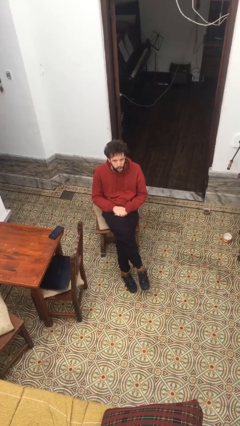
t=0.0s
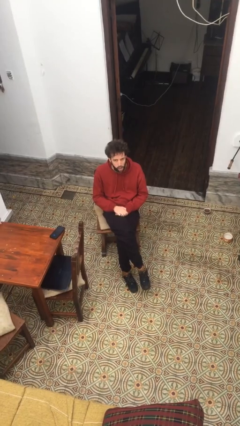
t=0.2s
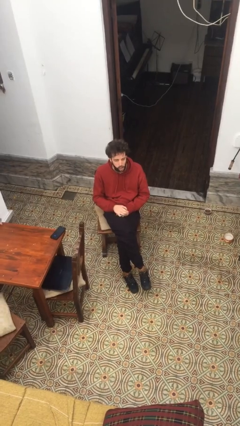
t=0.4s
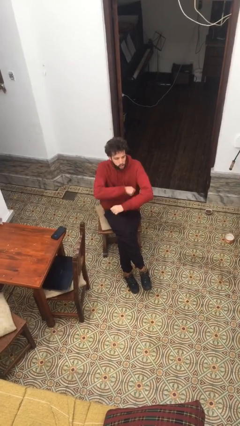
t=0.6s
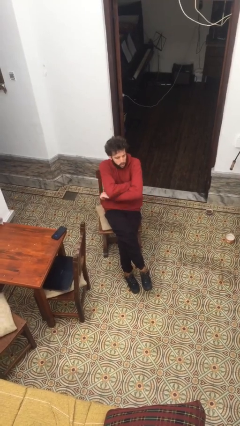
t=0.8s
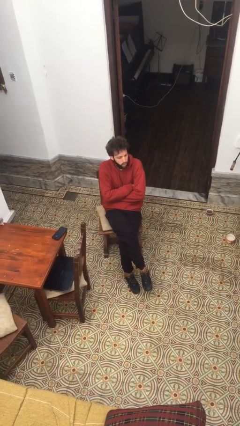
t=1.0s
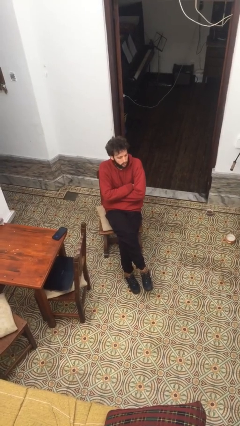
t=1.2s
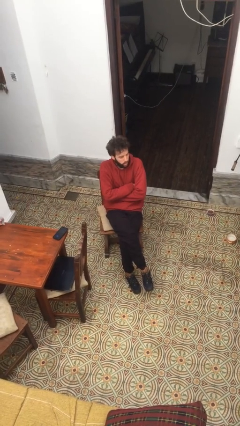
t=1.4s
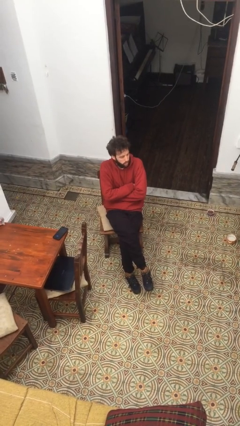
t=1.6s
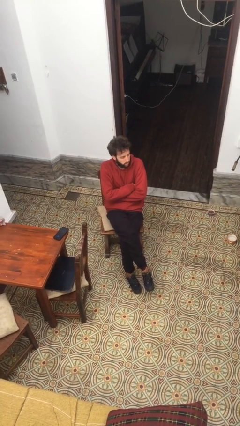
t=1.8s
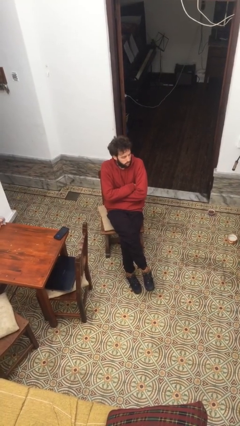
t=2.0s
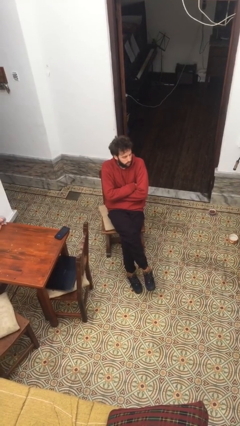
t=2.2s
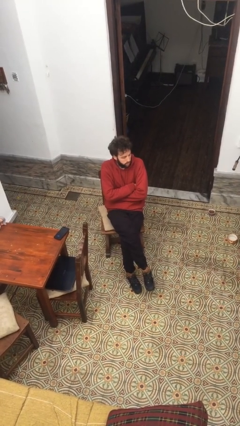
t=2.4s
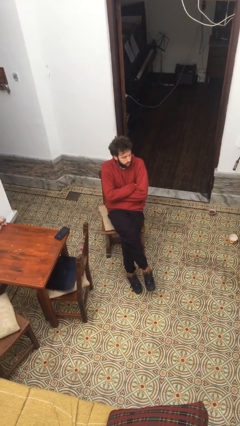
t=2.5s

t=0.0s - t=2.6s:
person crosses arms

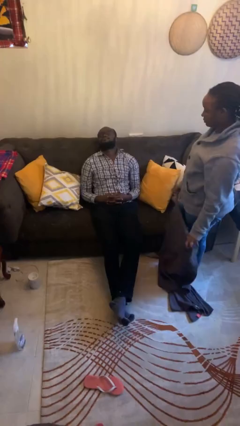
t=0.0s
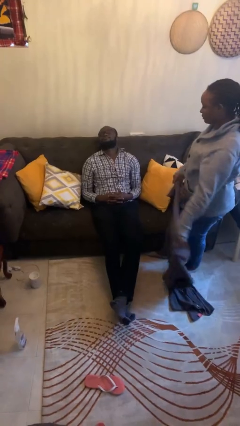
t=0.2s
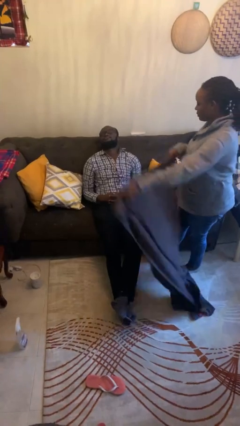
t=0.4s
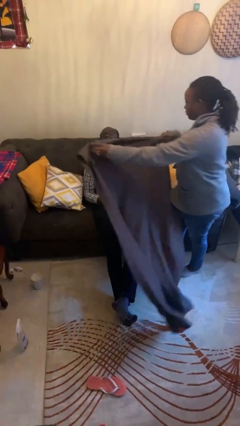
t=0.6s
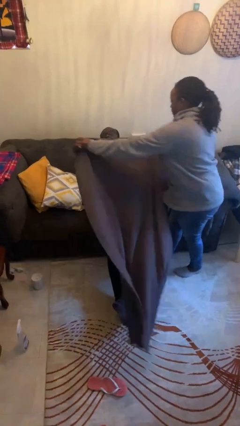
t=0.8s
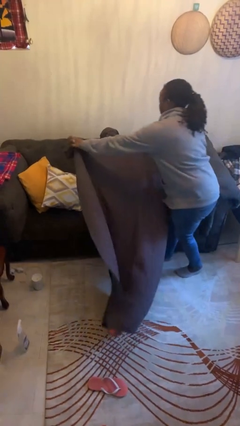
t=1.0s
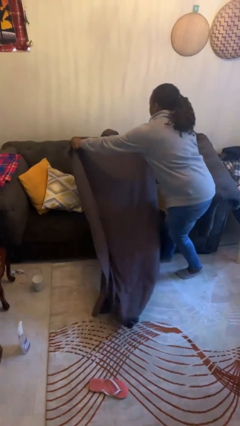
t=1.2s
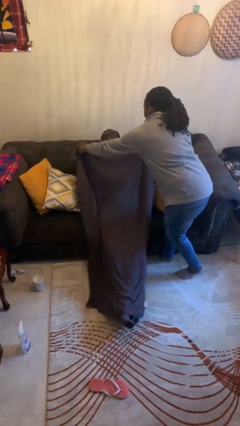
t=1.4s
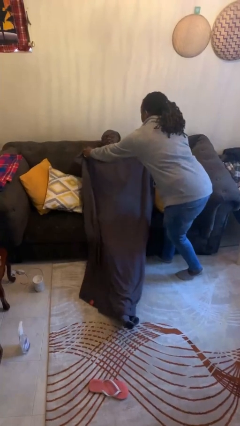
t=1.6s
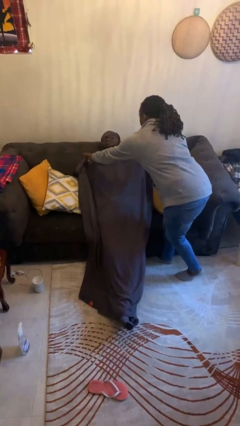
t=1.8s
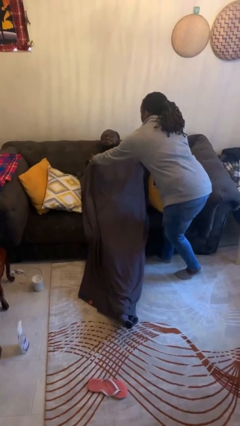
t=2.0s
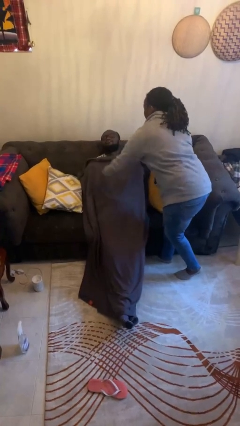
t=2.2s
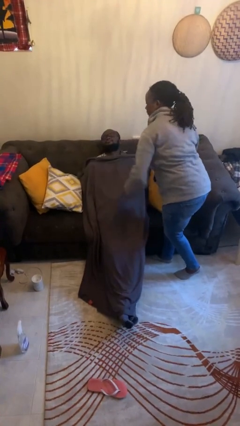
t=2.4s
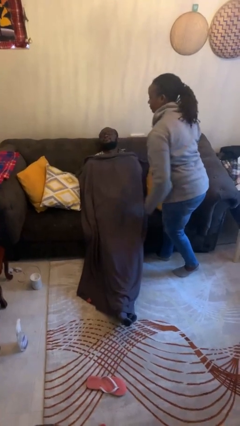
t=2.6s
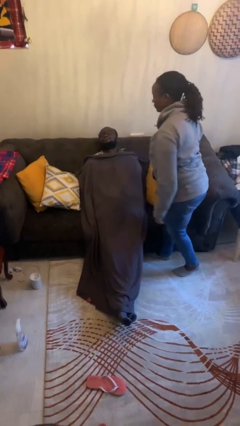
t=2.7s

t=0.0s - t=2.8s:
person covers friend with blanket

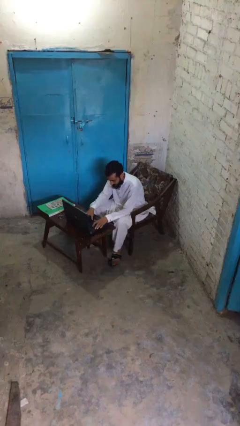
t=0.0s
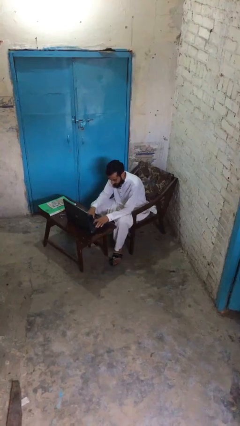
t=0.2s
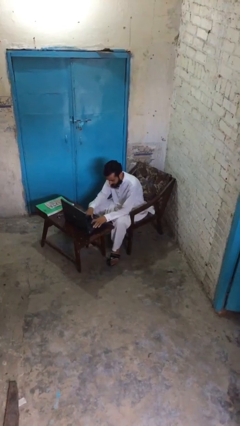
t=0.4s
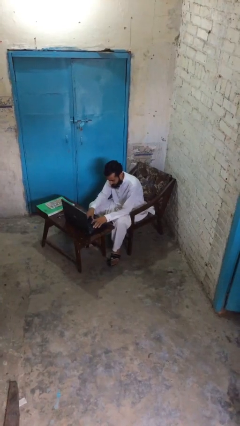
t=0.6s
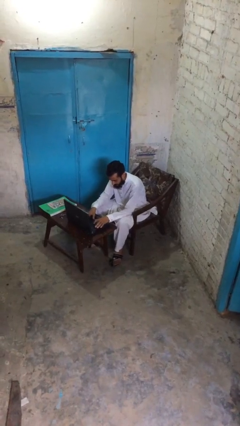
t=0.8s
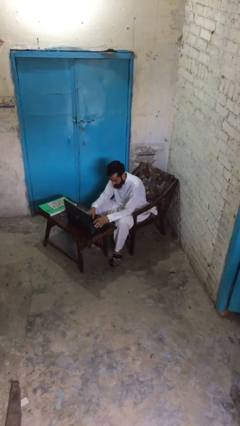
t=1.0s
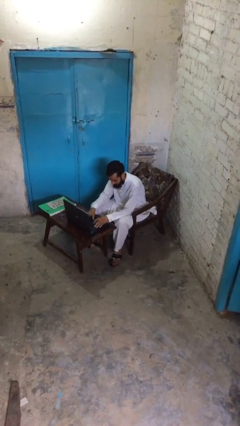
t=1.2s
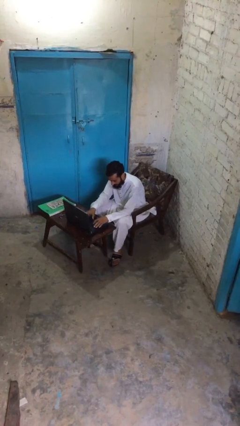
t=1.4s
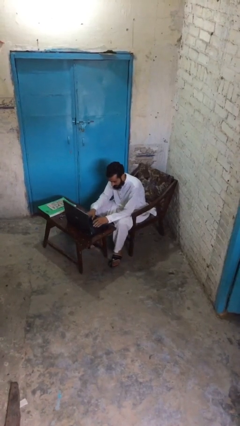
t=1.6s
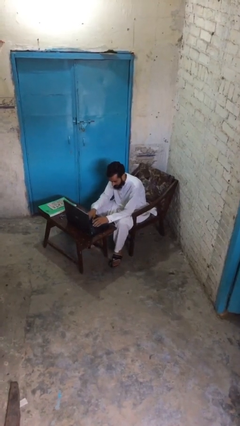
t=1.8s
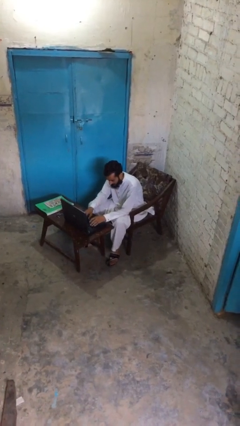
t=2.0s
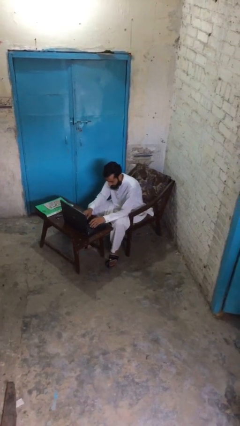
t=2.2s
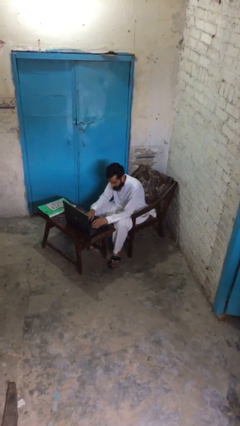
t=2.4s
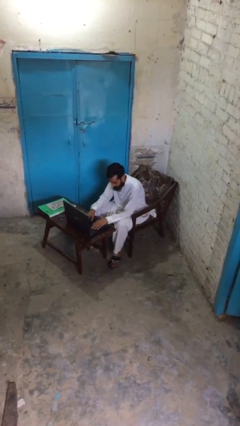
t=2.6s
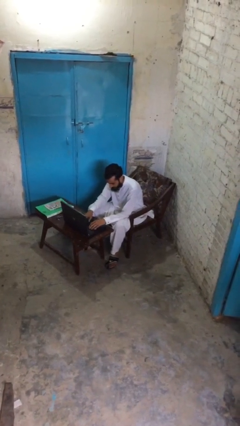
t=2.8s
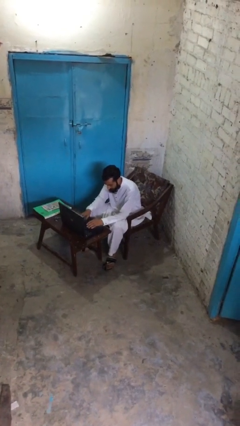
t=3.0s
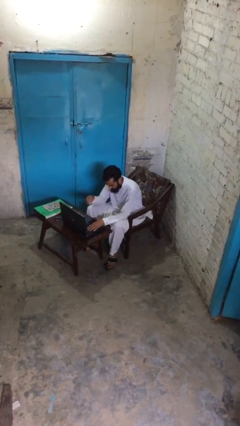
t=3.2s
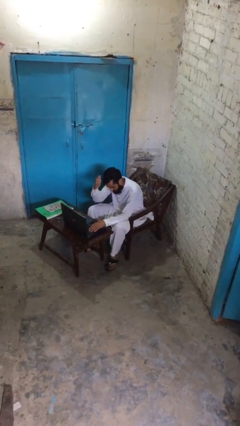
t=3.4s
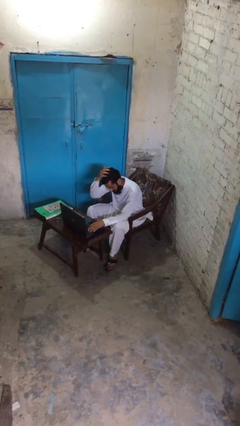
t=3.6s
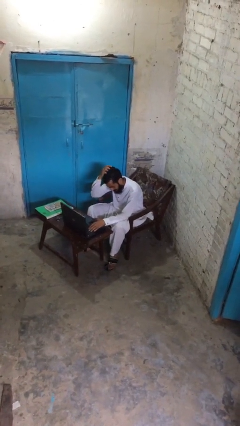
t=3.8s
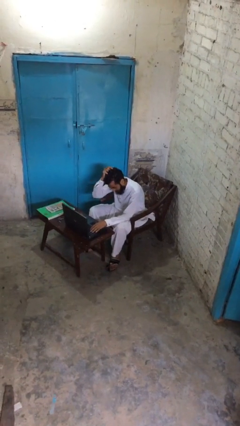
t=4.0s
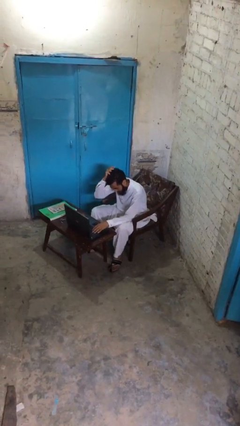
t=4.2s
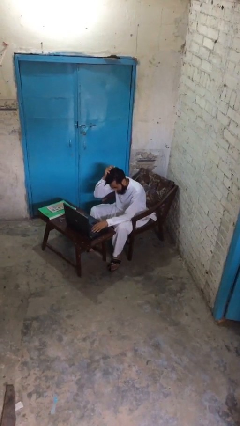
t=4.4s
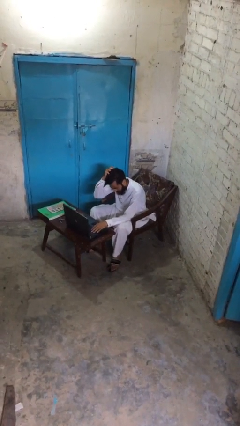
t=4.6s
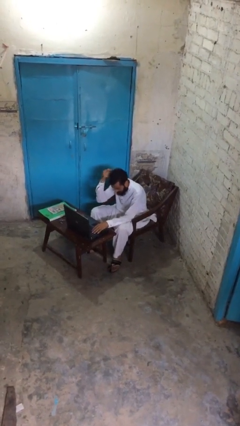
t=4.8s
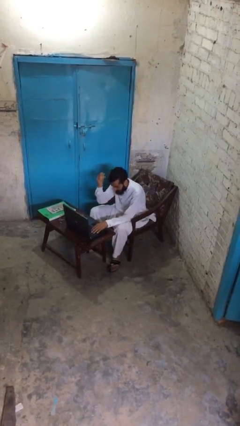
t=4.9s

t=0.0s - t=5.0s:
person interacts with laptop

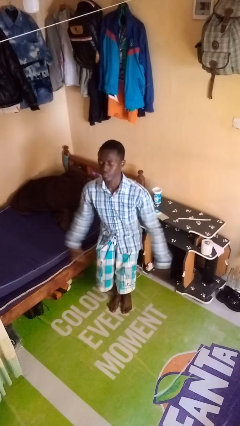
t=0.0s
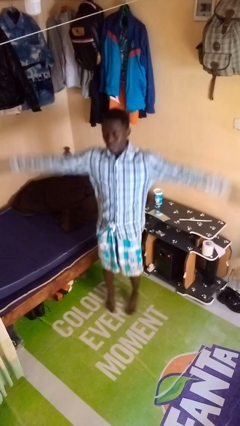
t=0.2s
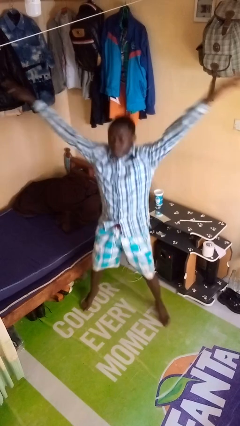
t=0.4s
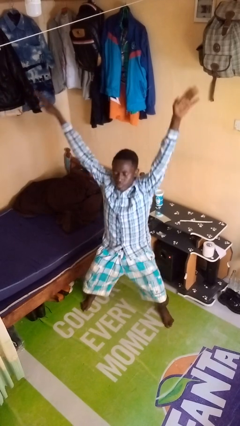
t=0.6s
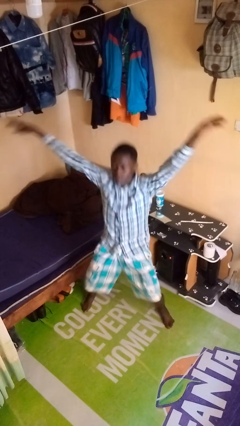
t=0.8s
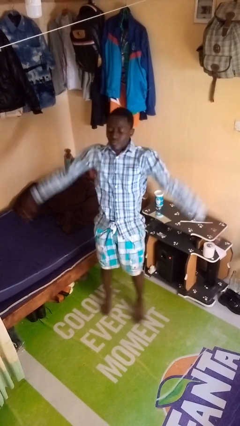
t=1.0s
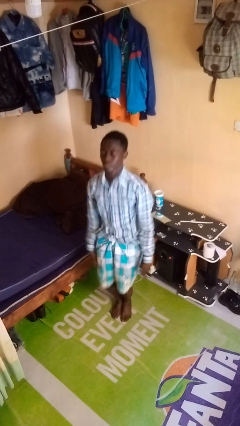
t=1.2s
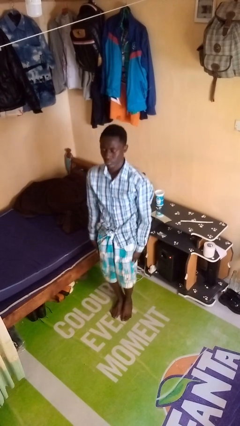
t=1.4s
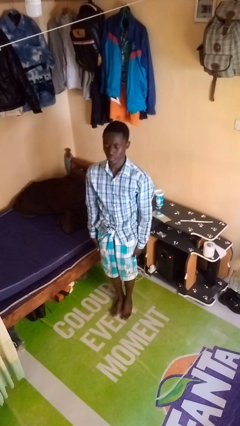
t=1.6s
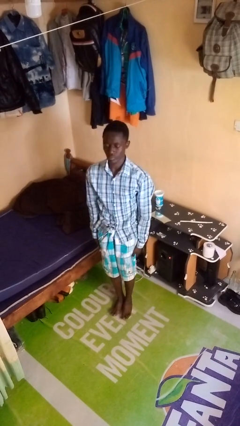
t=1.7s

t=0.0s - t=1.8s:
person exercises with jumping jacks

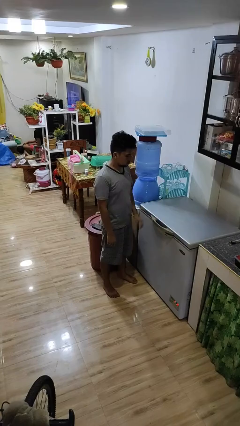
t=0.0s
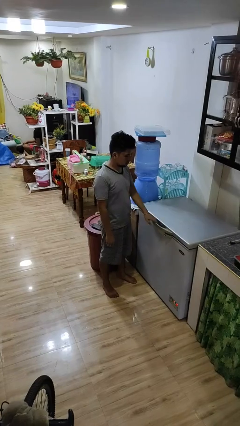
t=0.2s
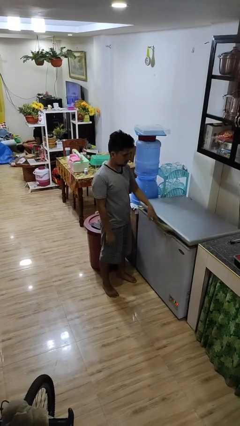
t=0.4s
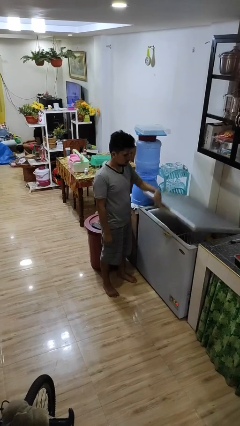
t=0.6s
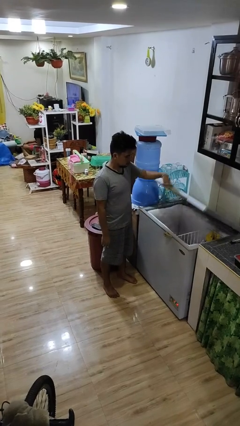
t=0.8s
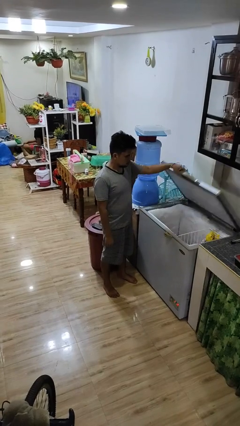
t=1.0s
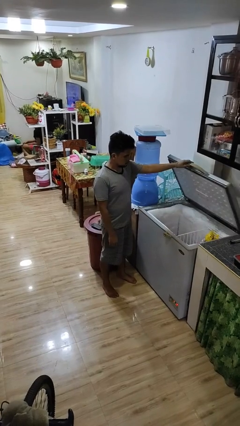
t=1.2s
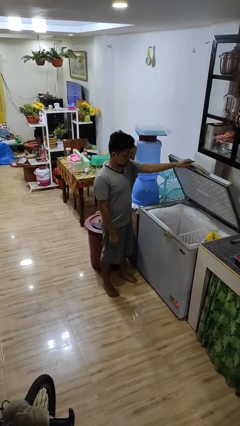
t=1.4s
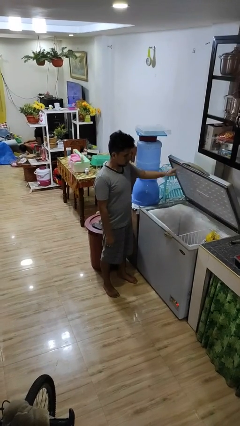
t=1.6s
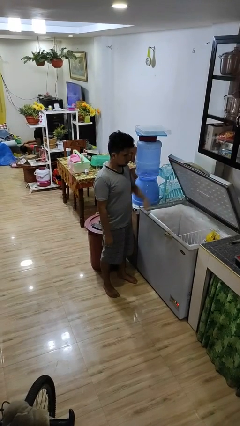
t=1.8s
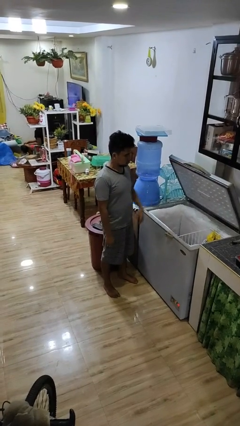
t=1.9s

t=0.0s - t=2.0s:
person opens refrigerator

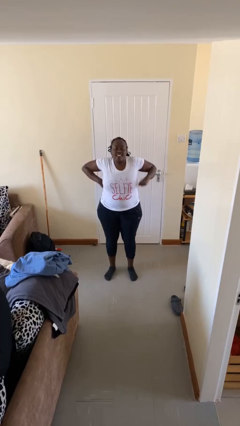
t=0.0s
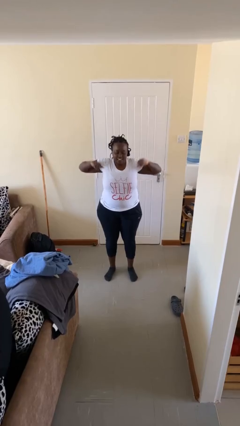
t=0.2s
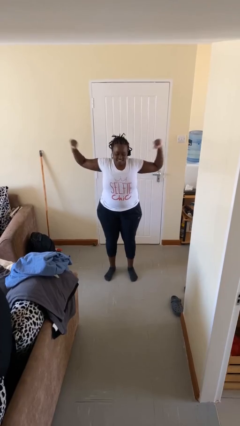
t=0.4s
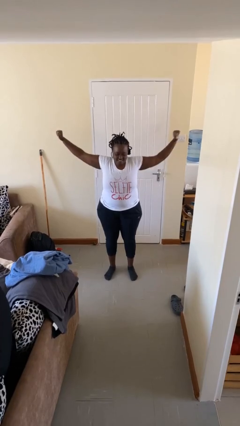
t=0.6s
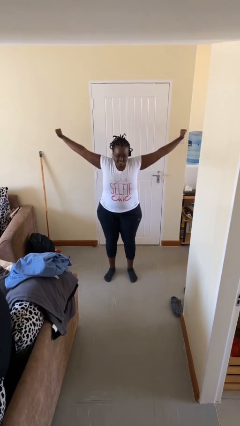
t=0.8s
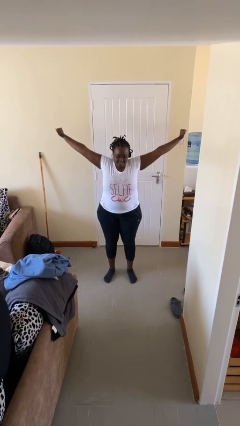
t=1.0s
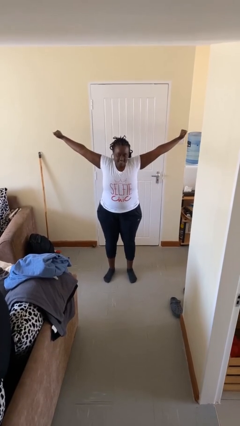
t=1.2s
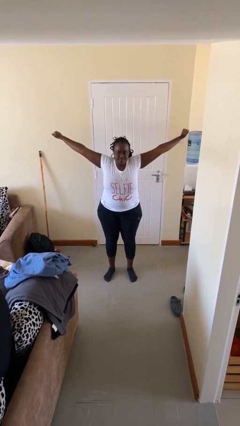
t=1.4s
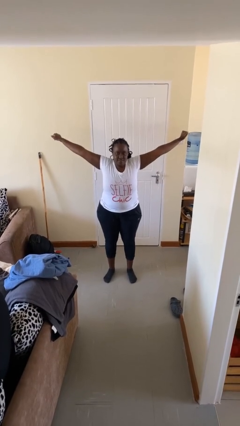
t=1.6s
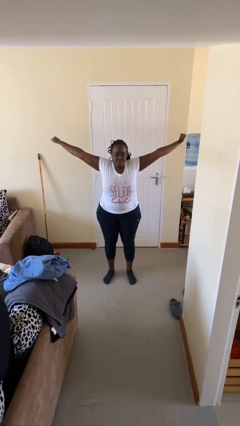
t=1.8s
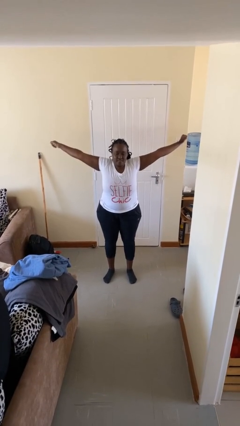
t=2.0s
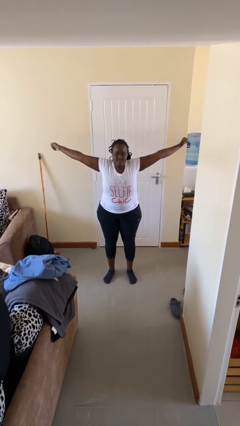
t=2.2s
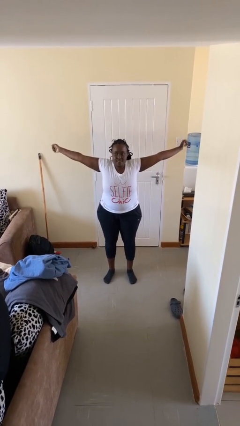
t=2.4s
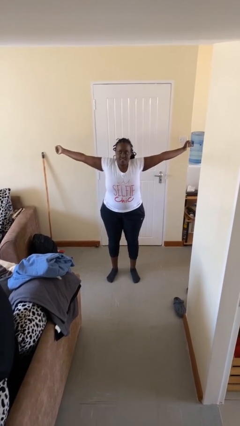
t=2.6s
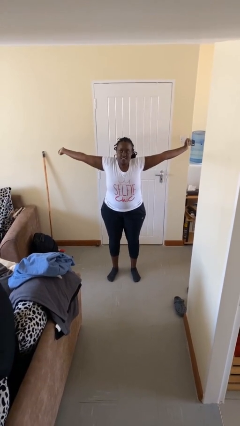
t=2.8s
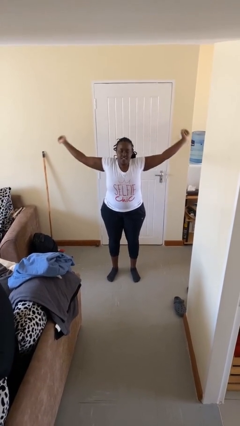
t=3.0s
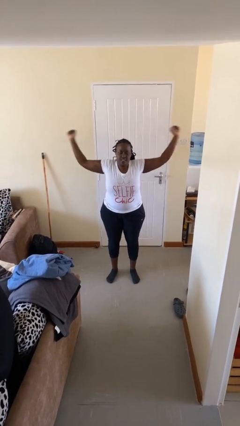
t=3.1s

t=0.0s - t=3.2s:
person stretches arms to side
